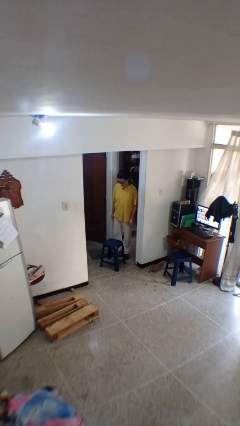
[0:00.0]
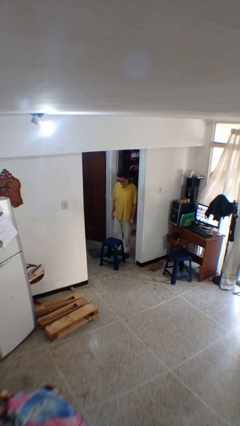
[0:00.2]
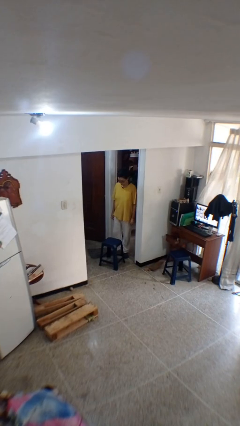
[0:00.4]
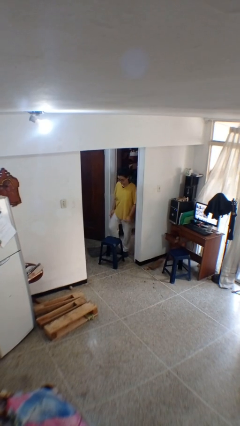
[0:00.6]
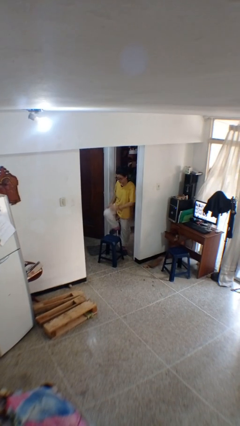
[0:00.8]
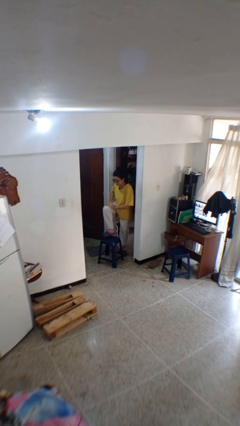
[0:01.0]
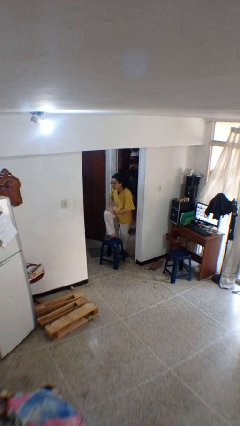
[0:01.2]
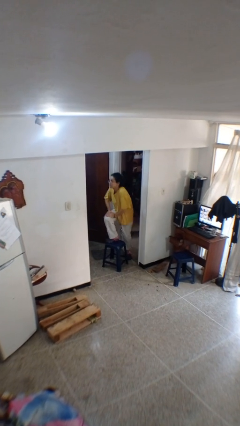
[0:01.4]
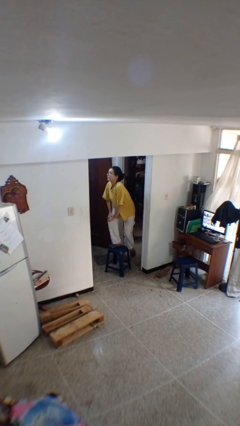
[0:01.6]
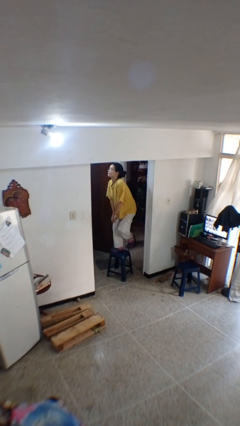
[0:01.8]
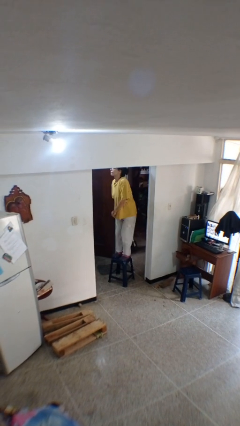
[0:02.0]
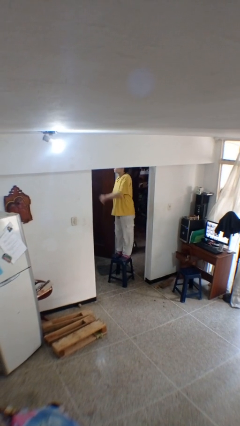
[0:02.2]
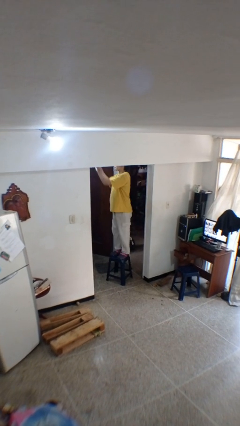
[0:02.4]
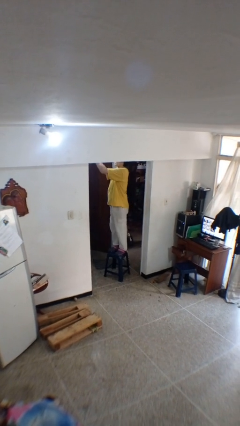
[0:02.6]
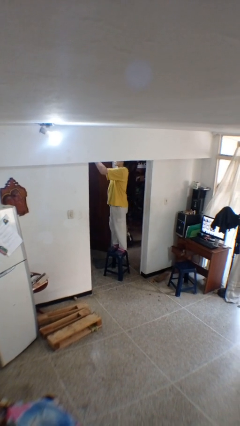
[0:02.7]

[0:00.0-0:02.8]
person climbs on chair

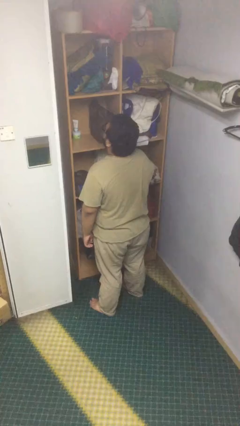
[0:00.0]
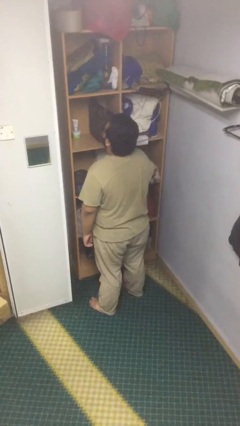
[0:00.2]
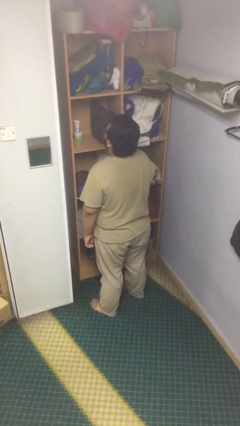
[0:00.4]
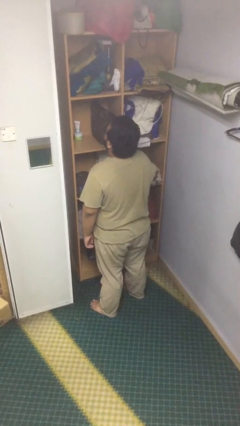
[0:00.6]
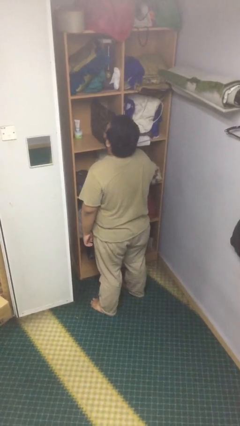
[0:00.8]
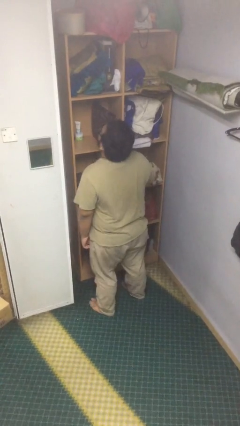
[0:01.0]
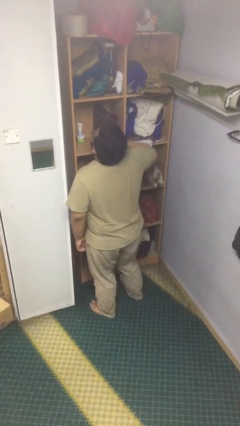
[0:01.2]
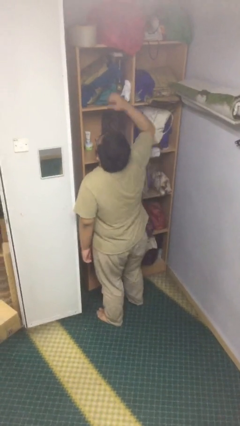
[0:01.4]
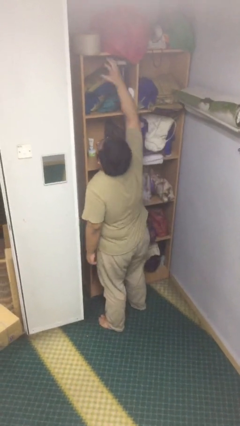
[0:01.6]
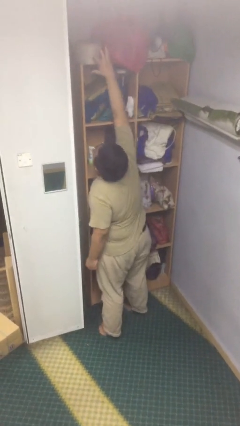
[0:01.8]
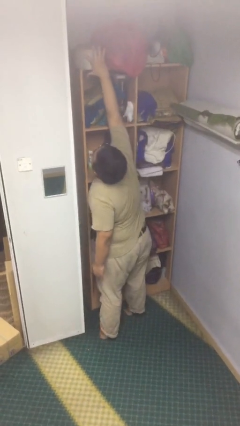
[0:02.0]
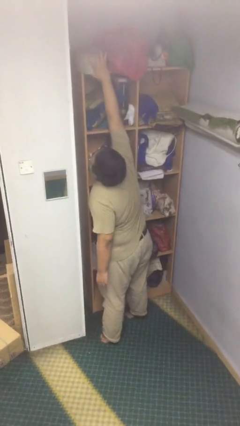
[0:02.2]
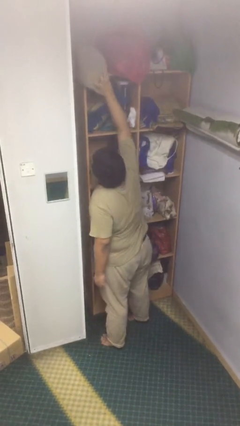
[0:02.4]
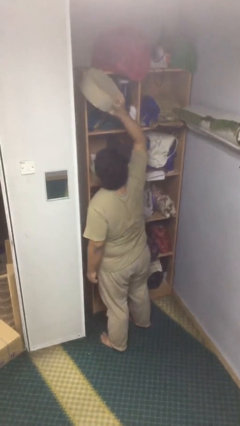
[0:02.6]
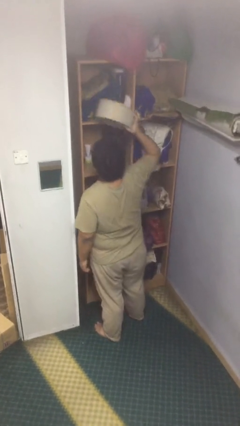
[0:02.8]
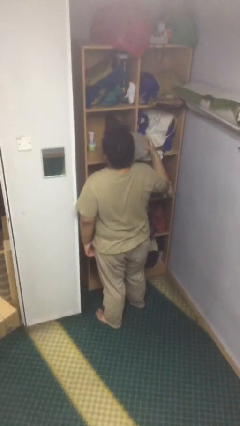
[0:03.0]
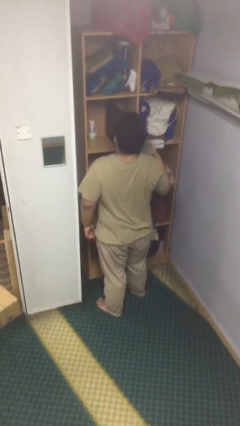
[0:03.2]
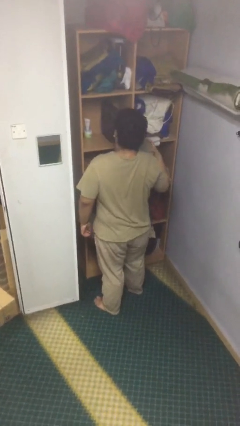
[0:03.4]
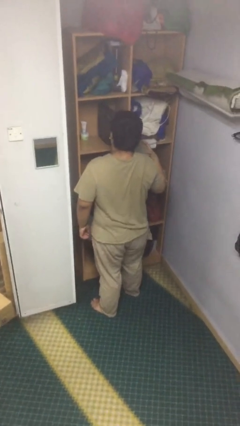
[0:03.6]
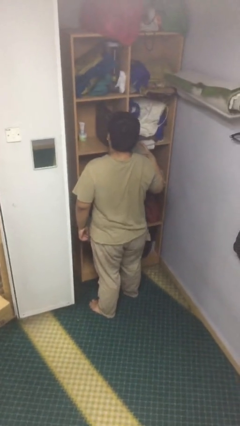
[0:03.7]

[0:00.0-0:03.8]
person picks up object from shelf

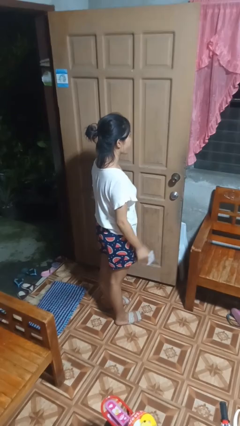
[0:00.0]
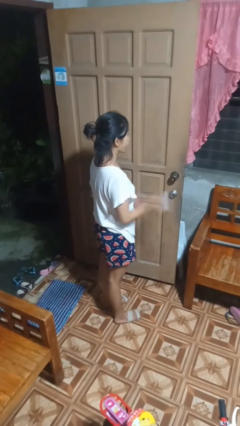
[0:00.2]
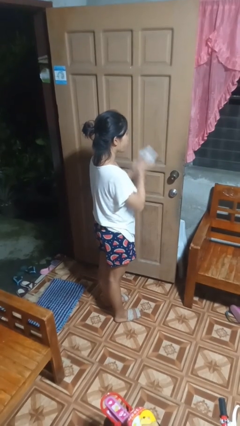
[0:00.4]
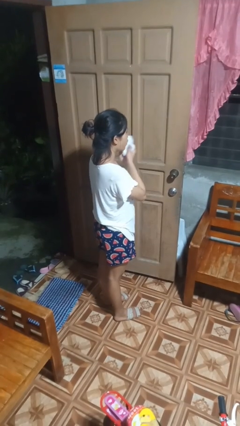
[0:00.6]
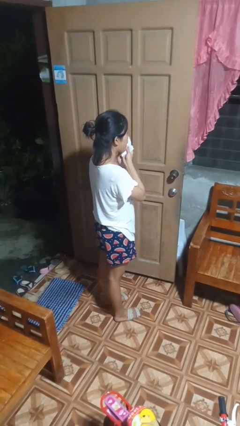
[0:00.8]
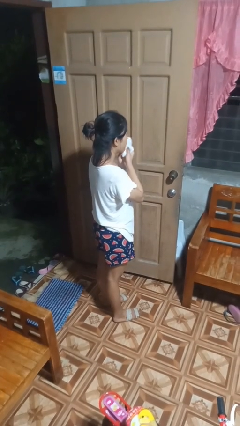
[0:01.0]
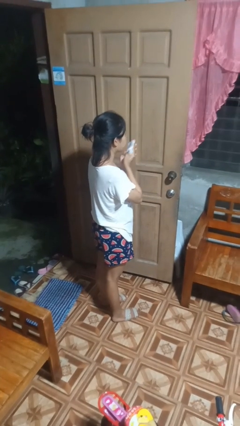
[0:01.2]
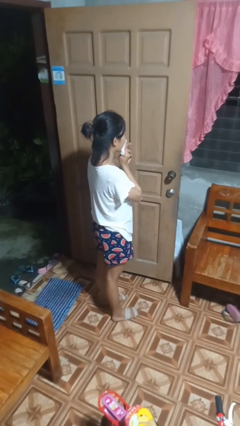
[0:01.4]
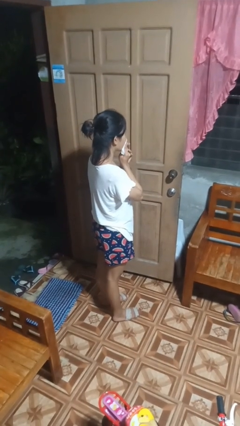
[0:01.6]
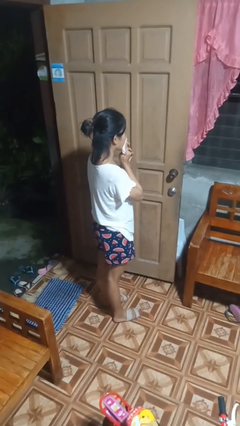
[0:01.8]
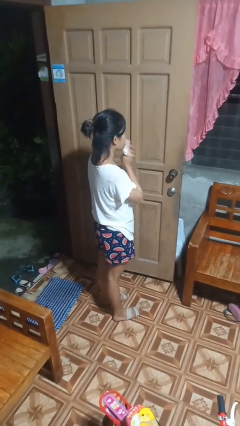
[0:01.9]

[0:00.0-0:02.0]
person wipes mouth with napkin

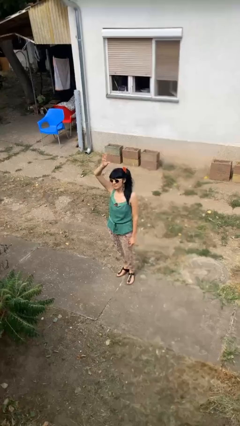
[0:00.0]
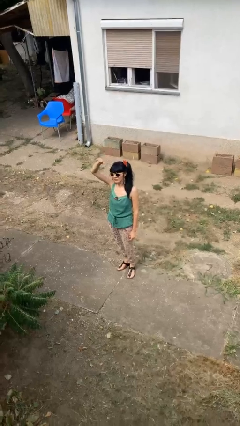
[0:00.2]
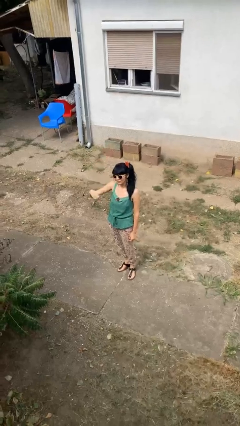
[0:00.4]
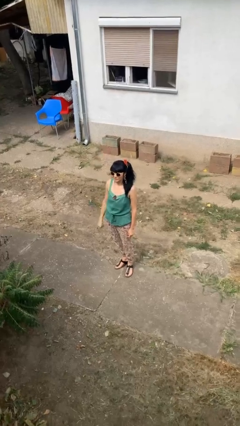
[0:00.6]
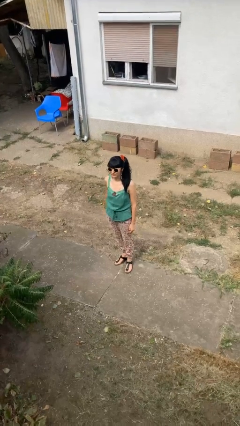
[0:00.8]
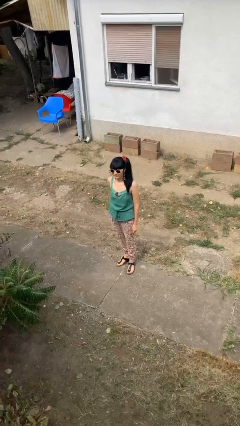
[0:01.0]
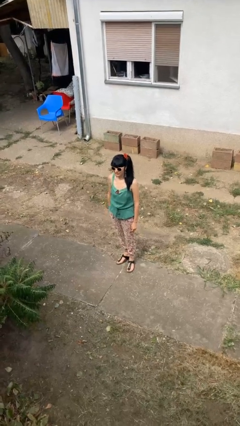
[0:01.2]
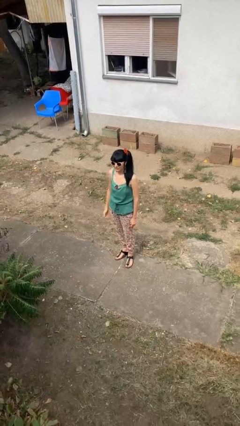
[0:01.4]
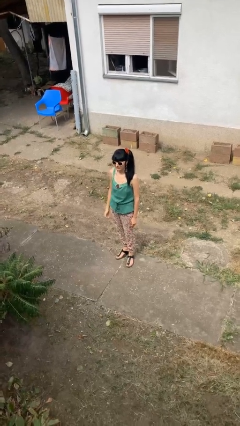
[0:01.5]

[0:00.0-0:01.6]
person gestures lower hand

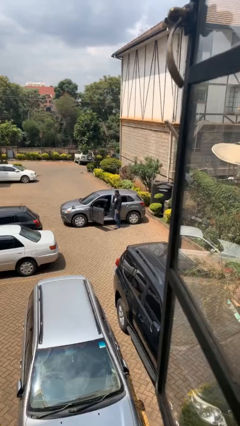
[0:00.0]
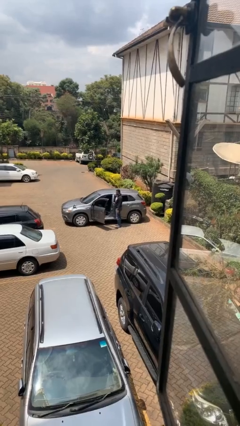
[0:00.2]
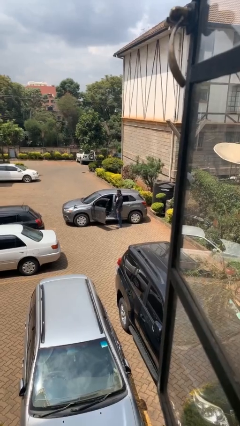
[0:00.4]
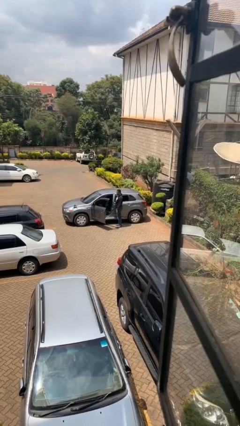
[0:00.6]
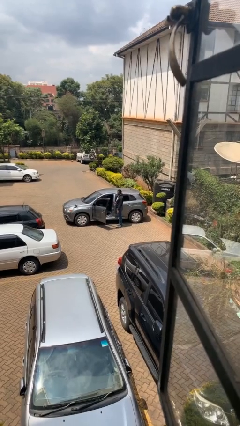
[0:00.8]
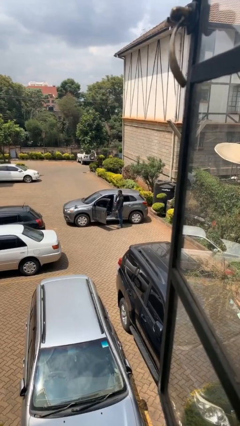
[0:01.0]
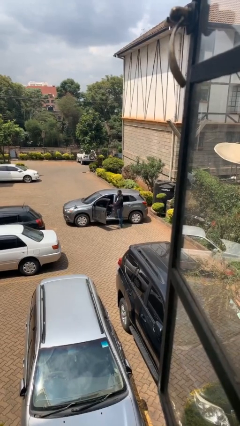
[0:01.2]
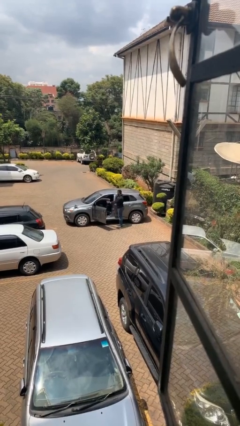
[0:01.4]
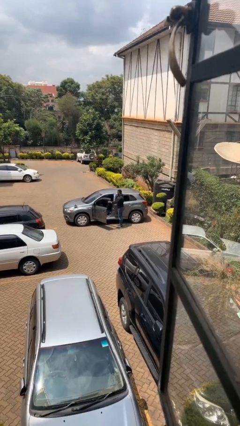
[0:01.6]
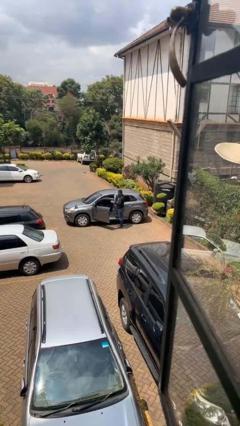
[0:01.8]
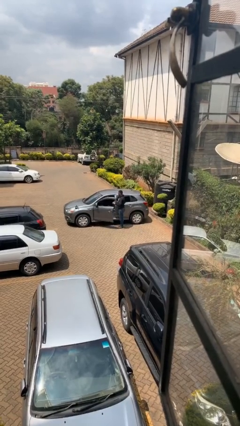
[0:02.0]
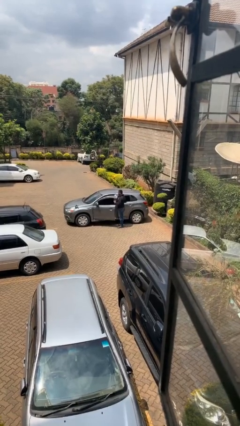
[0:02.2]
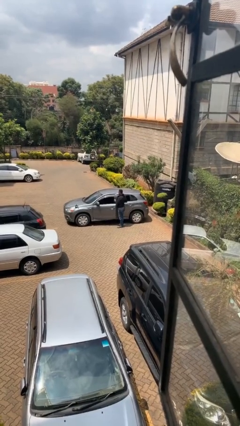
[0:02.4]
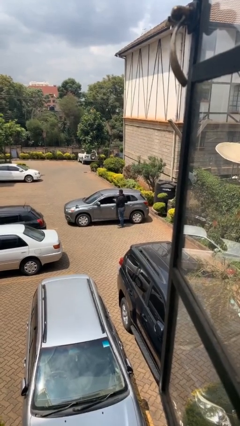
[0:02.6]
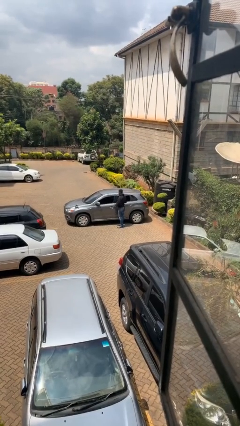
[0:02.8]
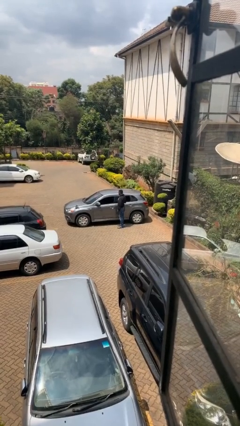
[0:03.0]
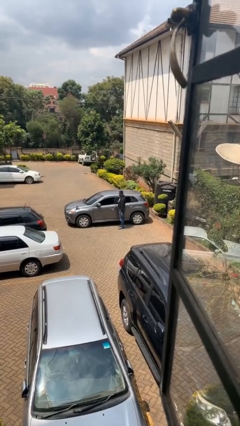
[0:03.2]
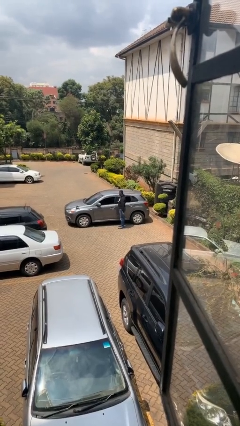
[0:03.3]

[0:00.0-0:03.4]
person closes car door

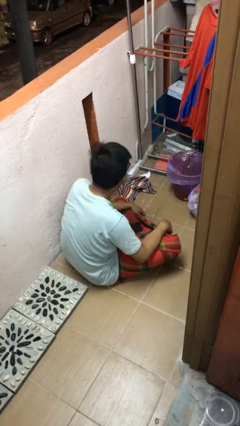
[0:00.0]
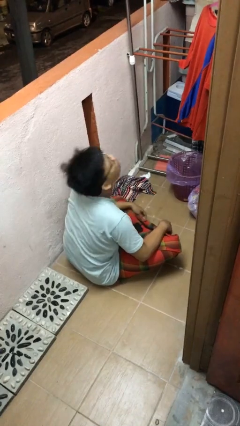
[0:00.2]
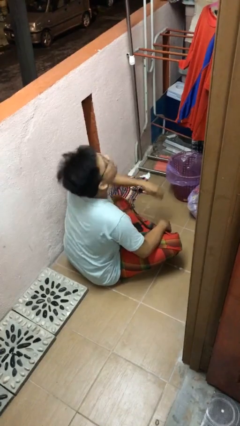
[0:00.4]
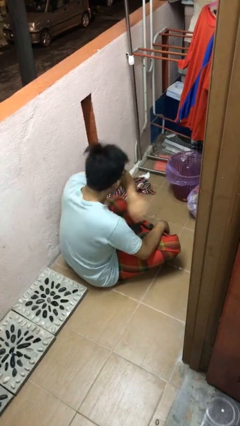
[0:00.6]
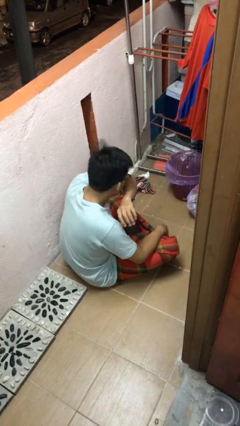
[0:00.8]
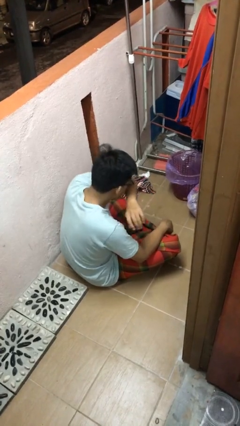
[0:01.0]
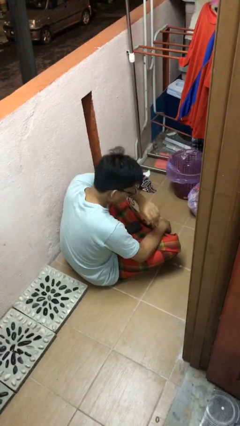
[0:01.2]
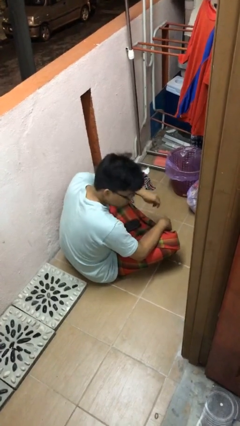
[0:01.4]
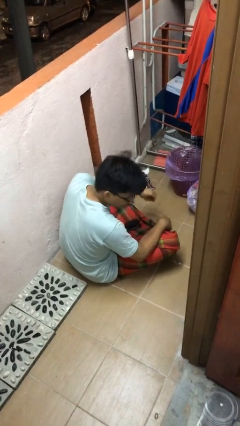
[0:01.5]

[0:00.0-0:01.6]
person sneezes into arm

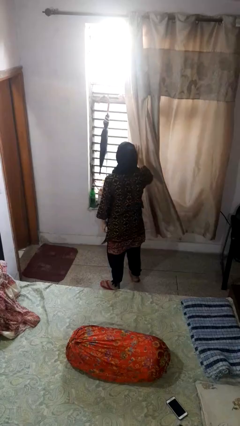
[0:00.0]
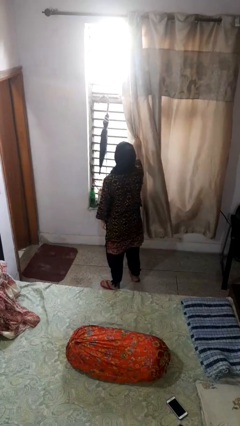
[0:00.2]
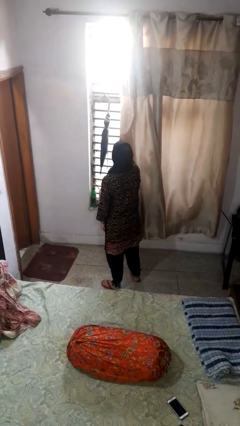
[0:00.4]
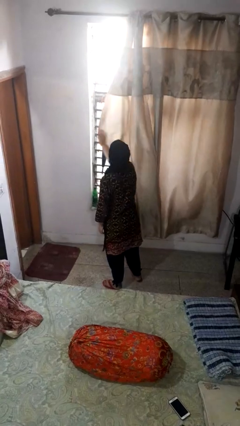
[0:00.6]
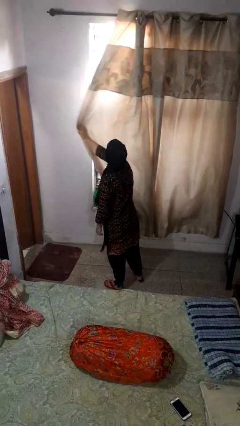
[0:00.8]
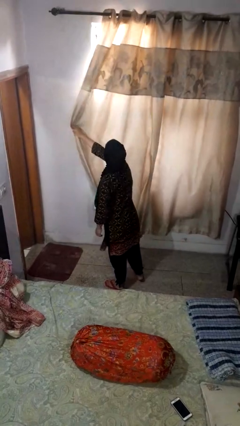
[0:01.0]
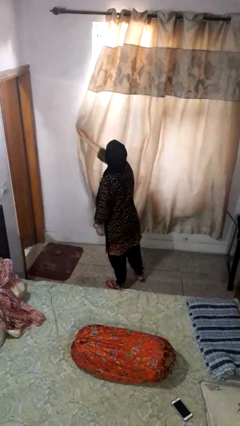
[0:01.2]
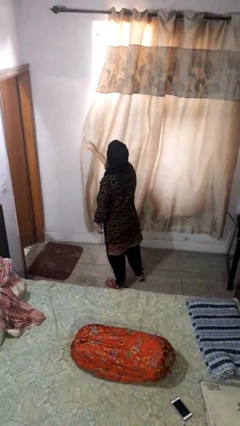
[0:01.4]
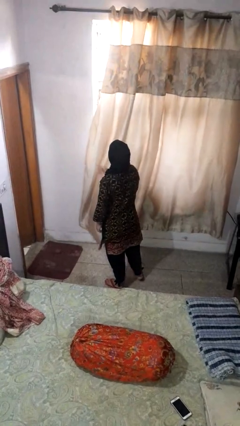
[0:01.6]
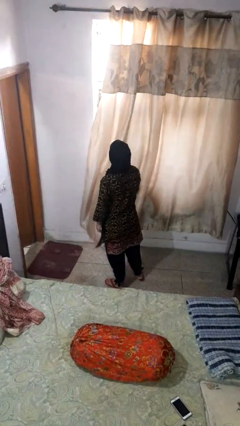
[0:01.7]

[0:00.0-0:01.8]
person closes curtains
